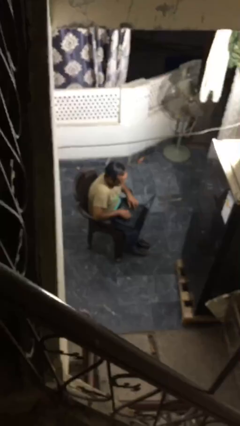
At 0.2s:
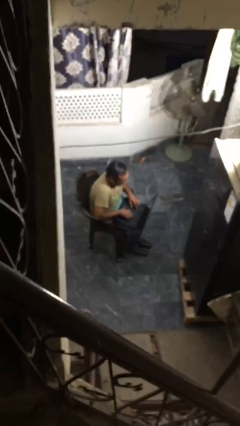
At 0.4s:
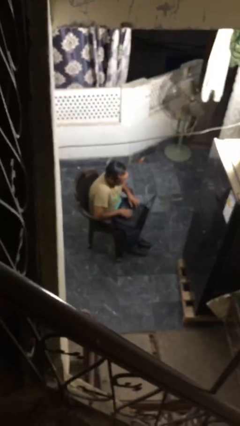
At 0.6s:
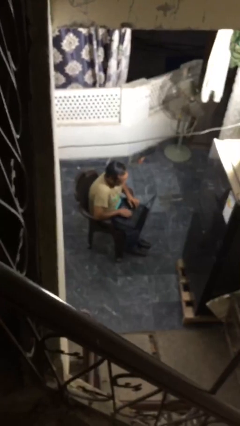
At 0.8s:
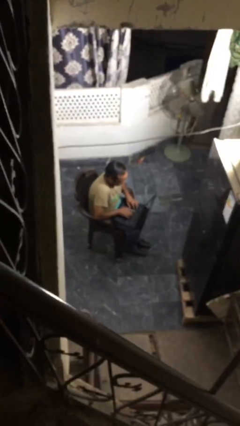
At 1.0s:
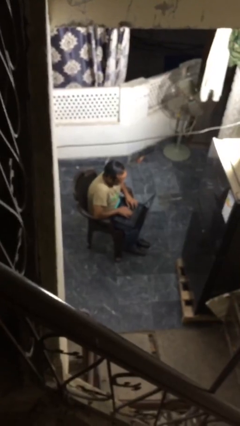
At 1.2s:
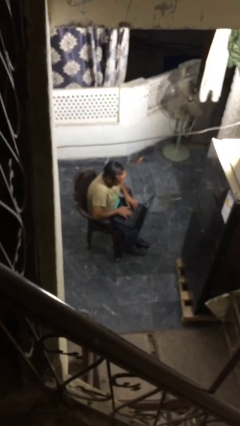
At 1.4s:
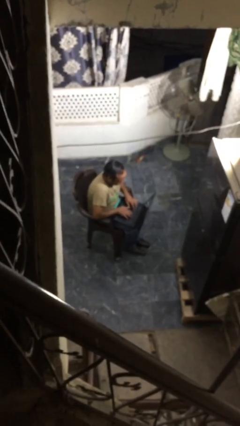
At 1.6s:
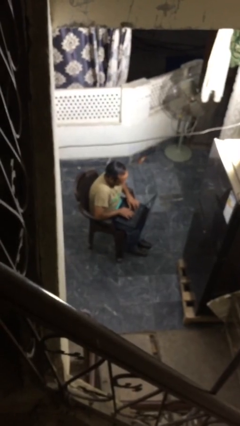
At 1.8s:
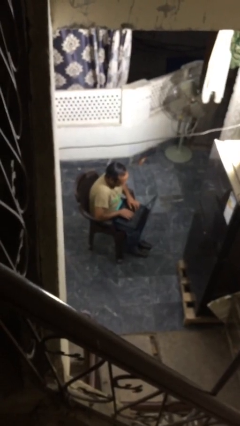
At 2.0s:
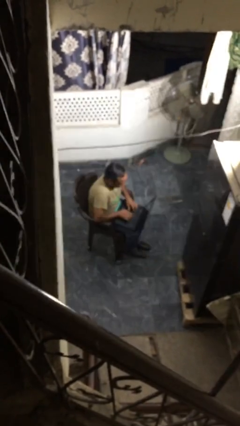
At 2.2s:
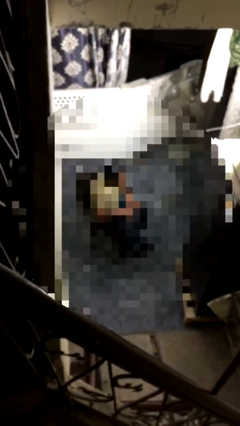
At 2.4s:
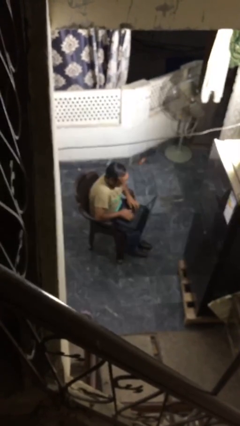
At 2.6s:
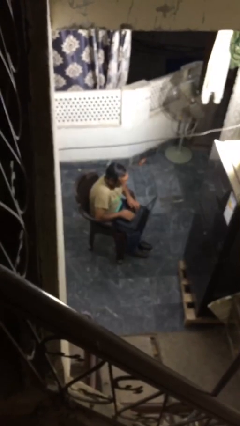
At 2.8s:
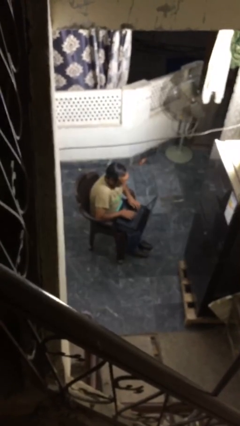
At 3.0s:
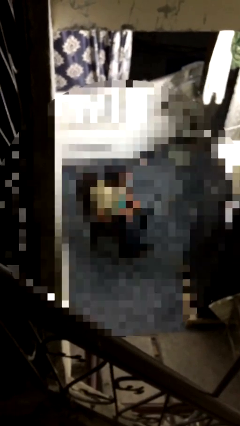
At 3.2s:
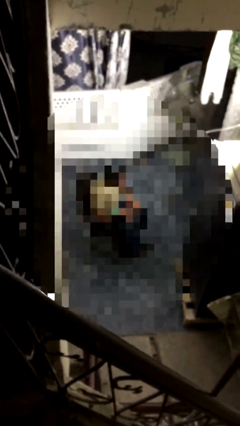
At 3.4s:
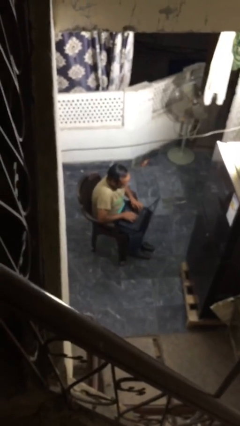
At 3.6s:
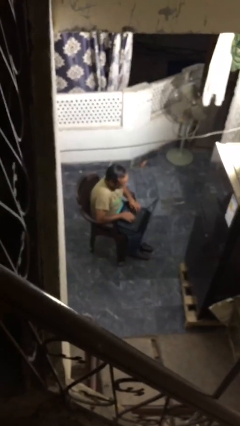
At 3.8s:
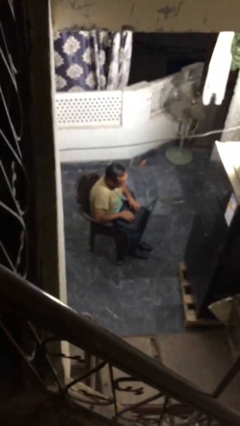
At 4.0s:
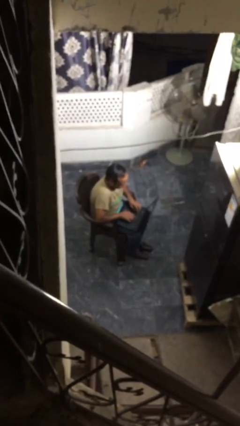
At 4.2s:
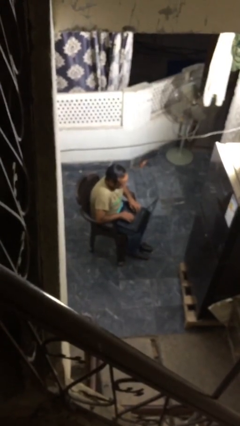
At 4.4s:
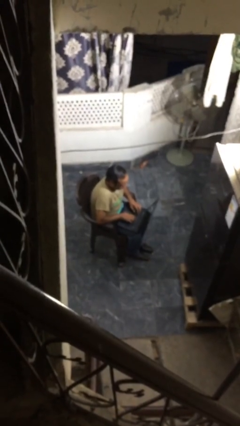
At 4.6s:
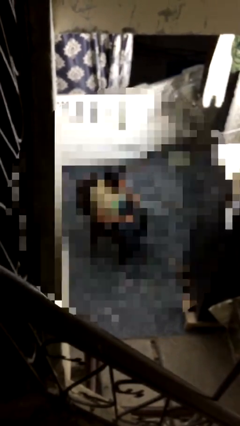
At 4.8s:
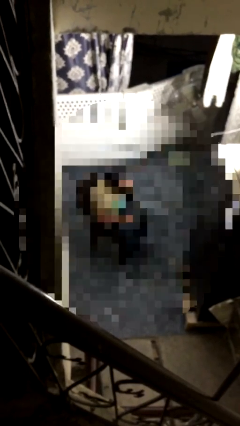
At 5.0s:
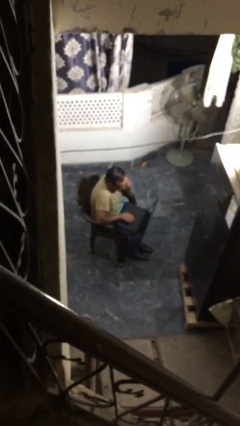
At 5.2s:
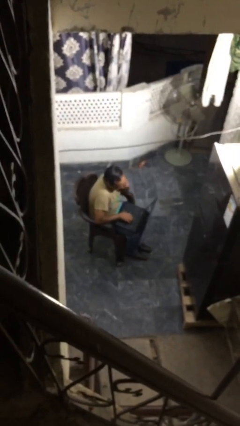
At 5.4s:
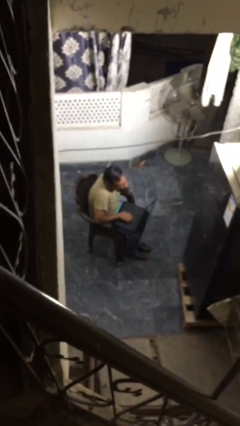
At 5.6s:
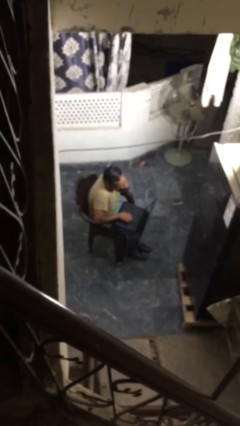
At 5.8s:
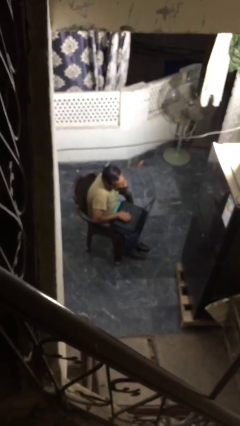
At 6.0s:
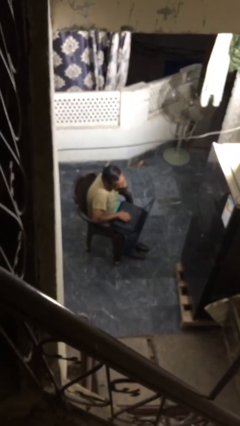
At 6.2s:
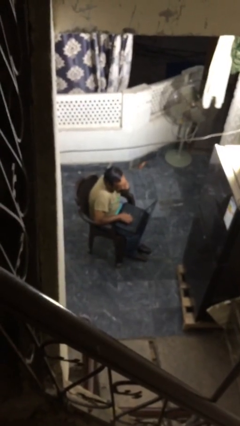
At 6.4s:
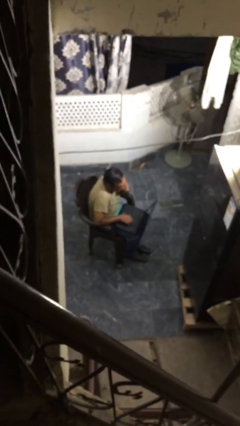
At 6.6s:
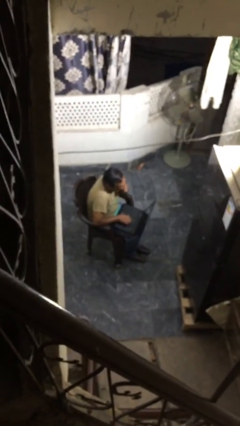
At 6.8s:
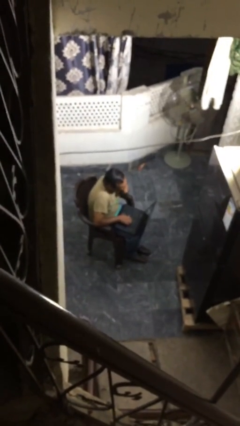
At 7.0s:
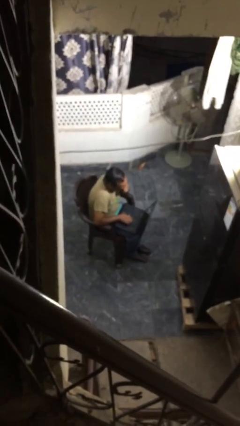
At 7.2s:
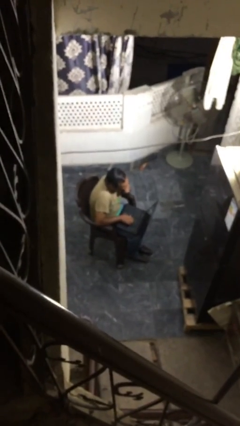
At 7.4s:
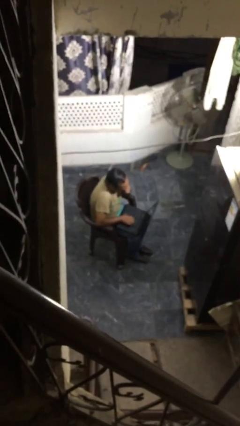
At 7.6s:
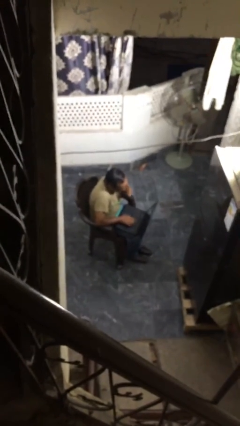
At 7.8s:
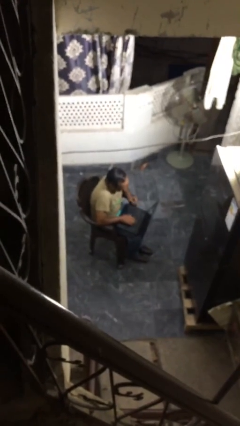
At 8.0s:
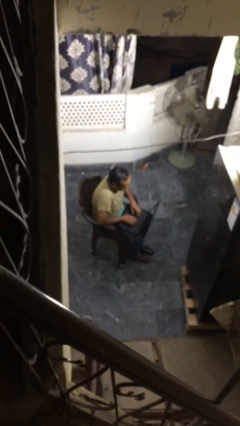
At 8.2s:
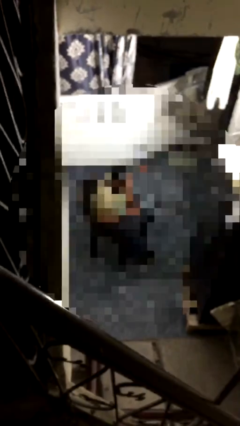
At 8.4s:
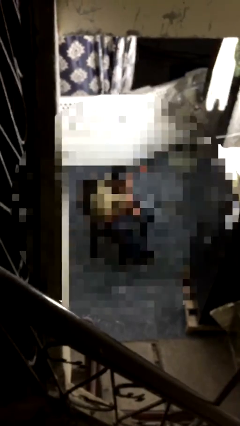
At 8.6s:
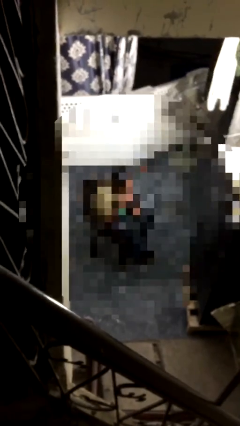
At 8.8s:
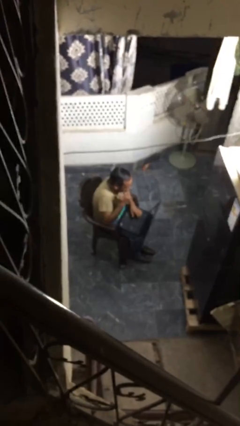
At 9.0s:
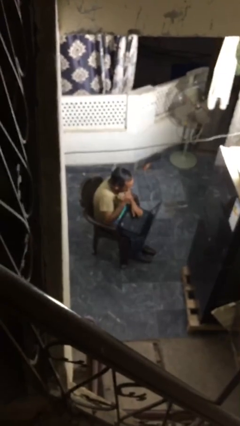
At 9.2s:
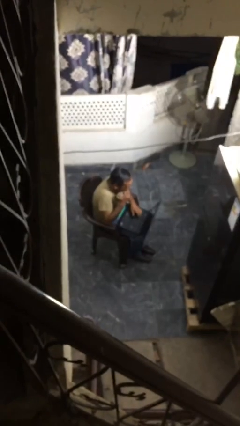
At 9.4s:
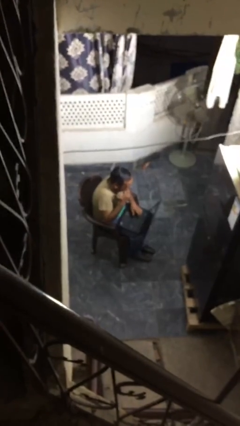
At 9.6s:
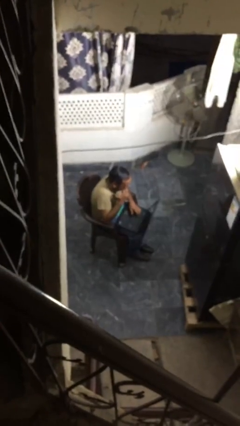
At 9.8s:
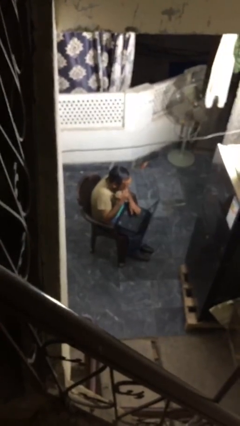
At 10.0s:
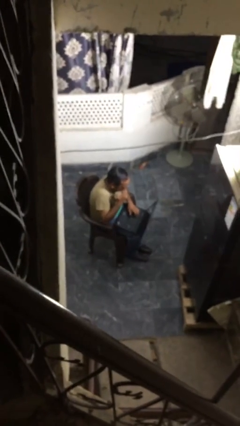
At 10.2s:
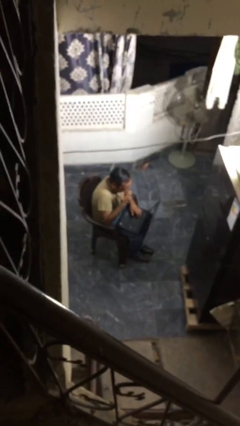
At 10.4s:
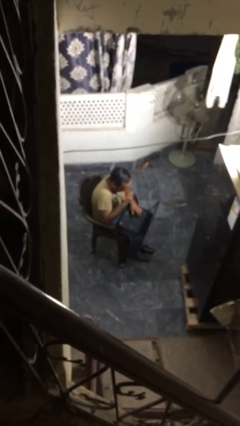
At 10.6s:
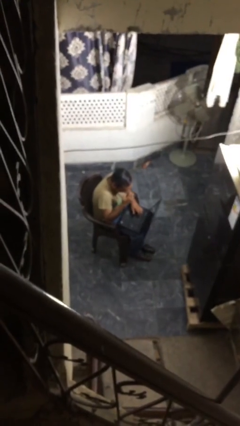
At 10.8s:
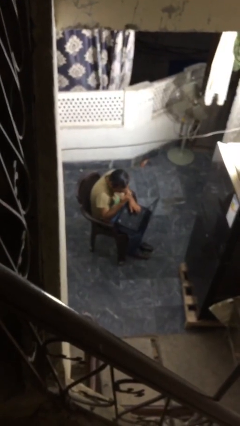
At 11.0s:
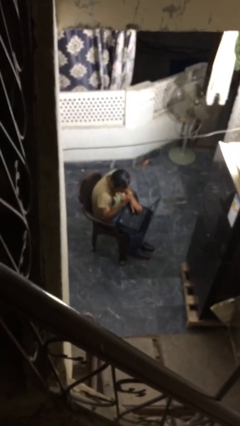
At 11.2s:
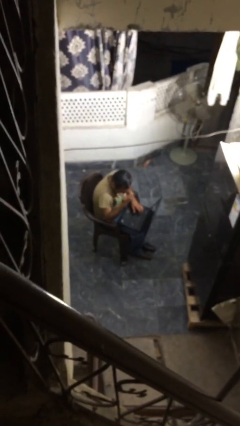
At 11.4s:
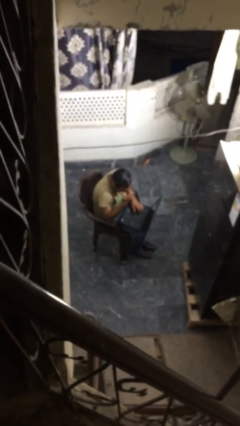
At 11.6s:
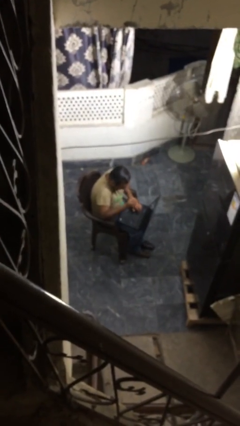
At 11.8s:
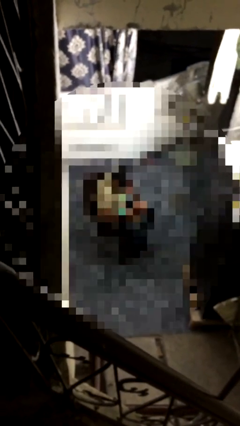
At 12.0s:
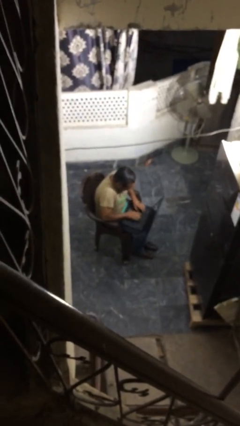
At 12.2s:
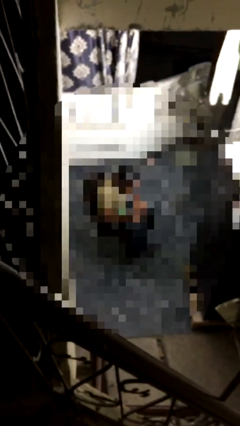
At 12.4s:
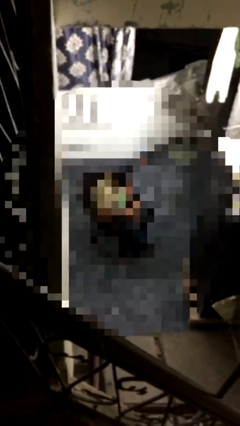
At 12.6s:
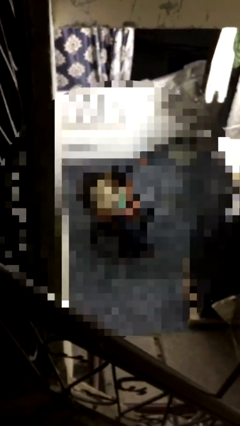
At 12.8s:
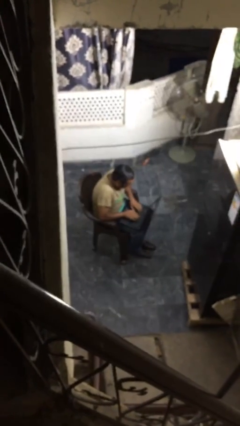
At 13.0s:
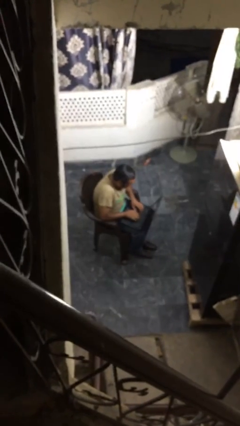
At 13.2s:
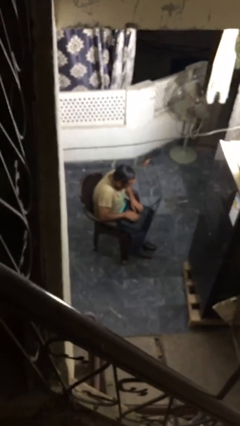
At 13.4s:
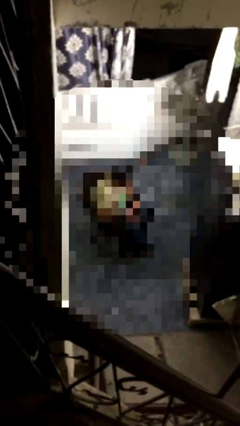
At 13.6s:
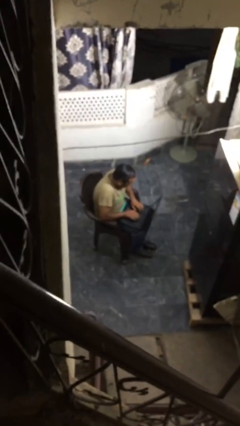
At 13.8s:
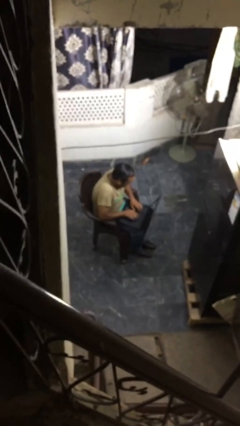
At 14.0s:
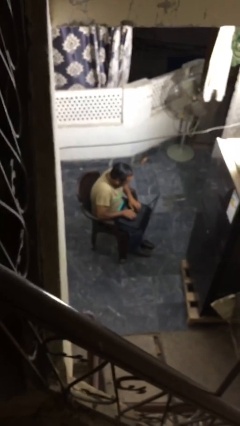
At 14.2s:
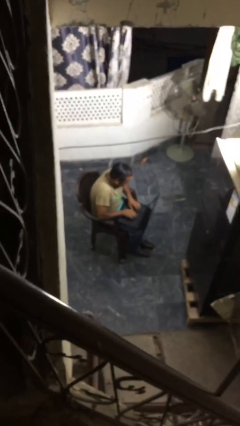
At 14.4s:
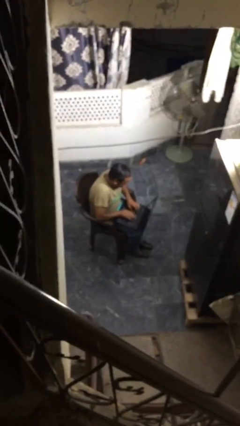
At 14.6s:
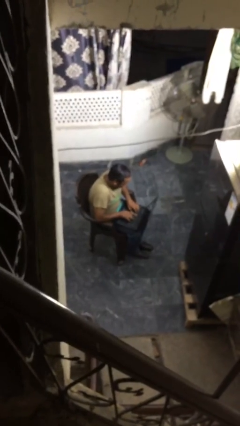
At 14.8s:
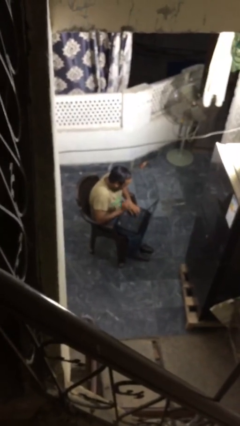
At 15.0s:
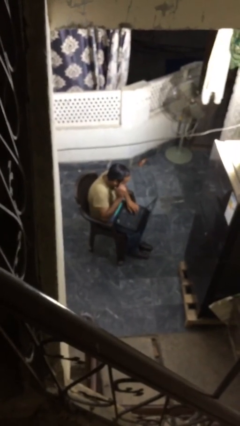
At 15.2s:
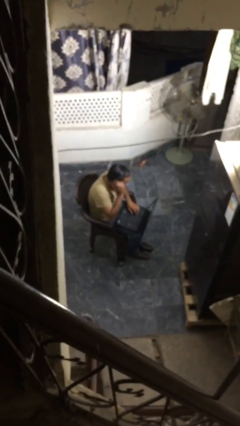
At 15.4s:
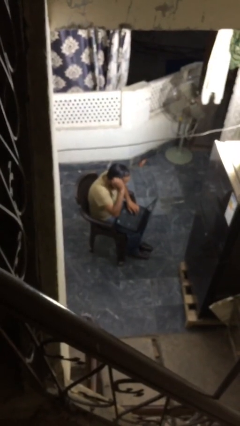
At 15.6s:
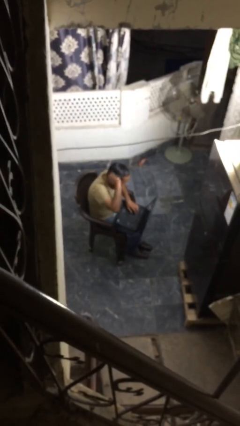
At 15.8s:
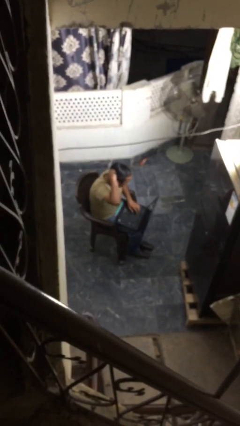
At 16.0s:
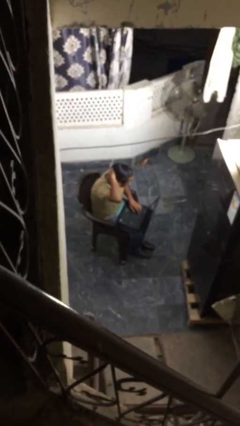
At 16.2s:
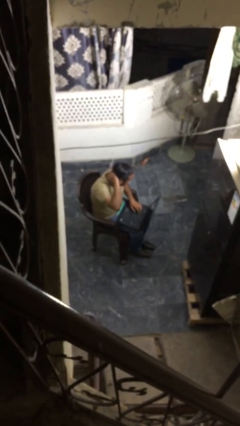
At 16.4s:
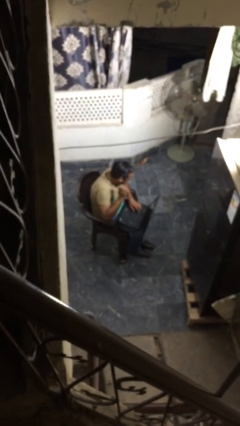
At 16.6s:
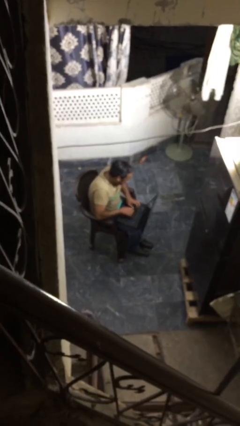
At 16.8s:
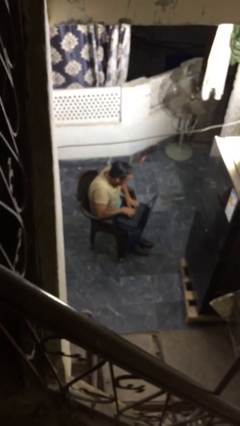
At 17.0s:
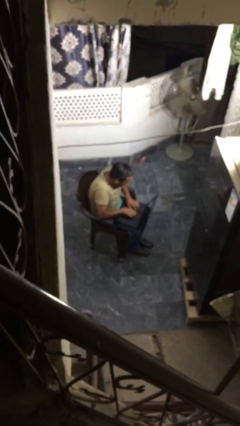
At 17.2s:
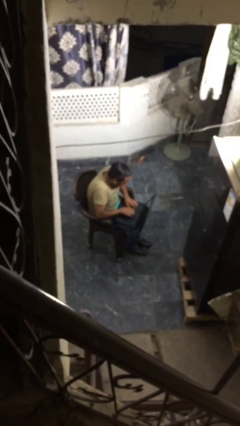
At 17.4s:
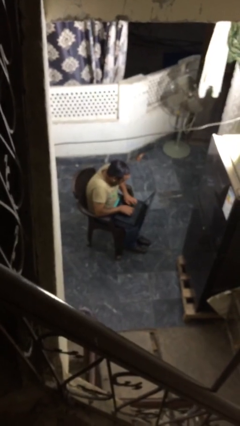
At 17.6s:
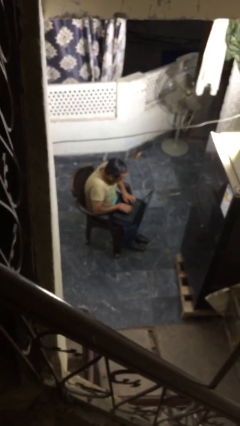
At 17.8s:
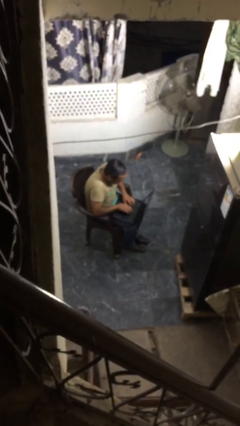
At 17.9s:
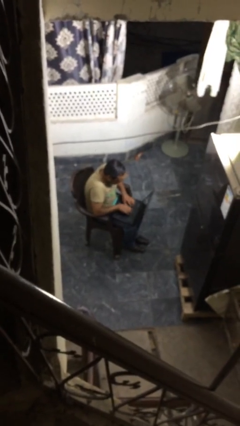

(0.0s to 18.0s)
person interacts with laptop

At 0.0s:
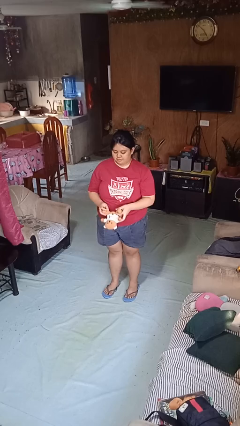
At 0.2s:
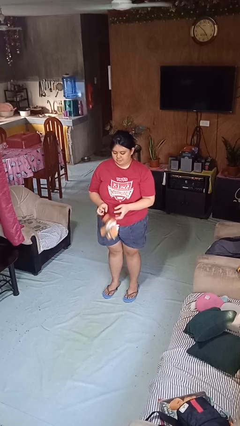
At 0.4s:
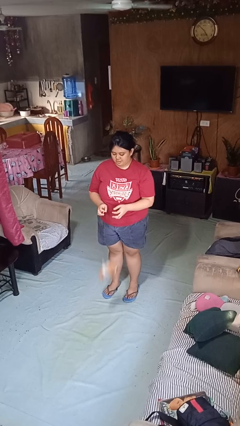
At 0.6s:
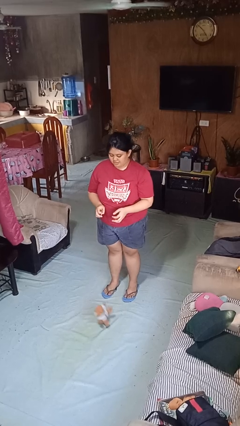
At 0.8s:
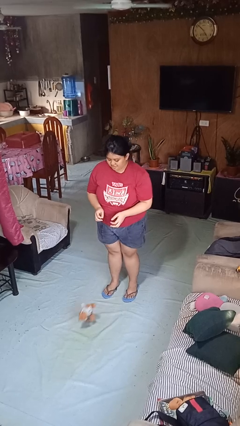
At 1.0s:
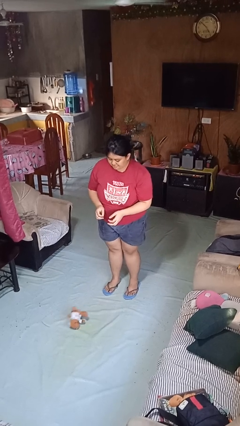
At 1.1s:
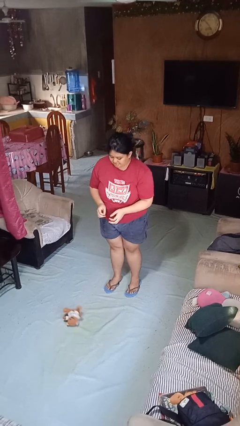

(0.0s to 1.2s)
person drops object
